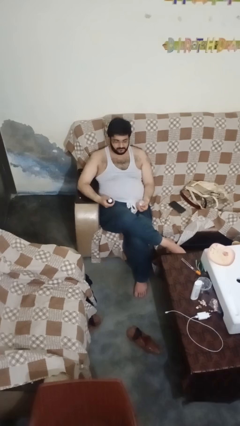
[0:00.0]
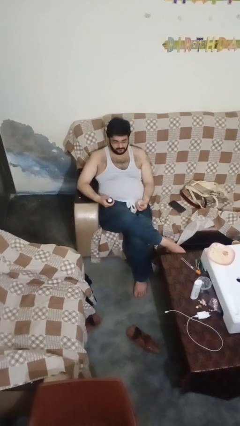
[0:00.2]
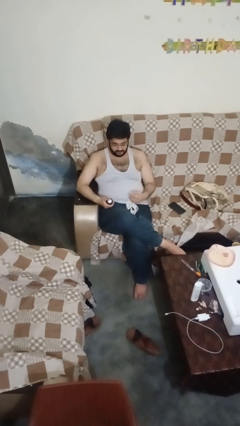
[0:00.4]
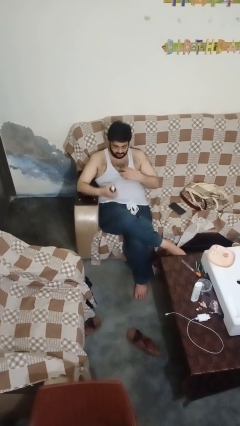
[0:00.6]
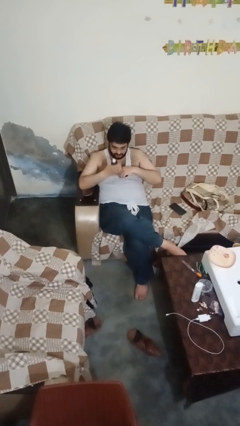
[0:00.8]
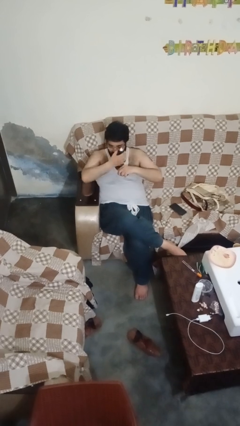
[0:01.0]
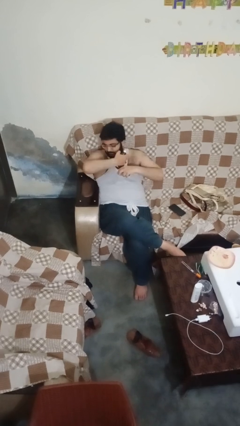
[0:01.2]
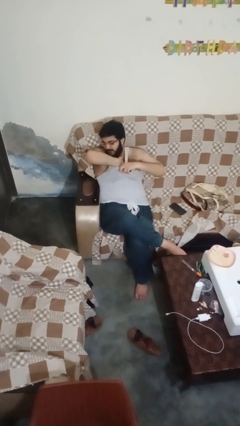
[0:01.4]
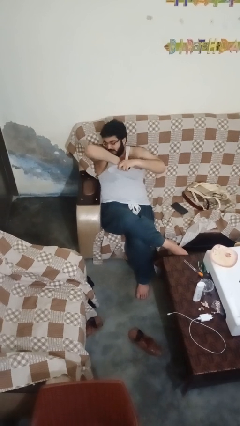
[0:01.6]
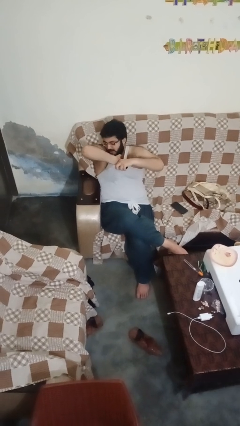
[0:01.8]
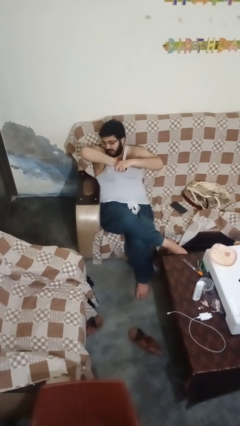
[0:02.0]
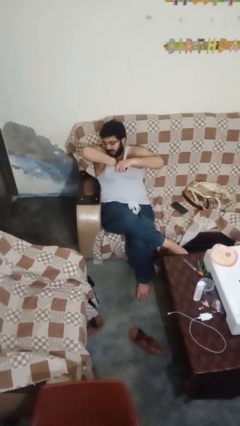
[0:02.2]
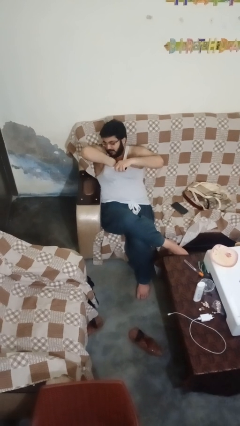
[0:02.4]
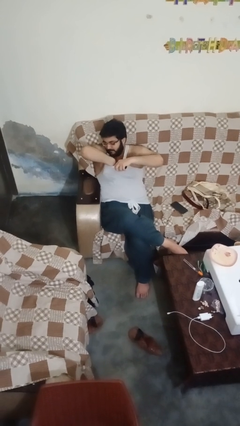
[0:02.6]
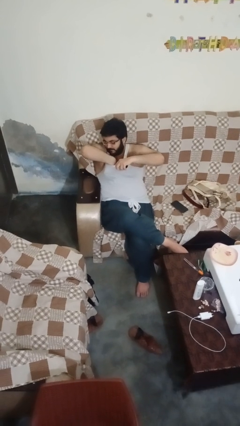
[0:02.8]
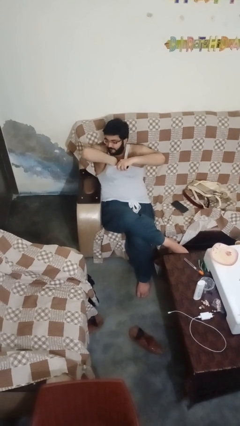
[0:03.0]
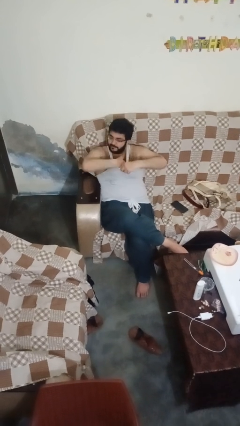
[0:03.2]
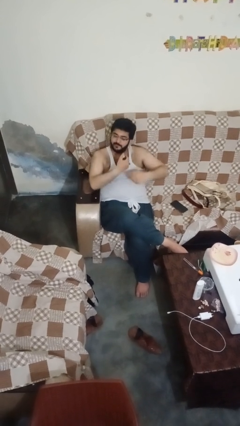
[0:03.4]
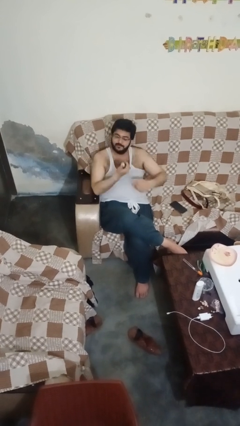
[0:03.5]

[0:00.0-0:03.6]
person applies deodorant

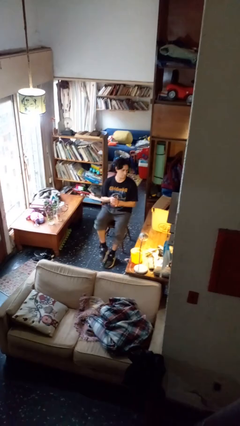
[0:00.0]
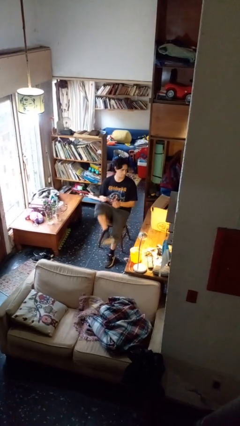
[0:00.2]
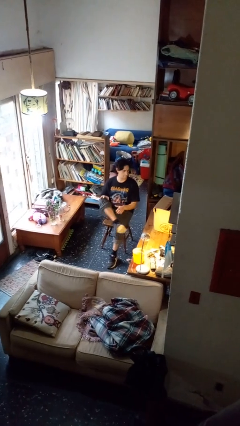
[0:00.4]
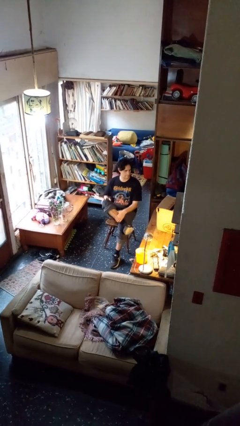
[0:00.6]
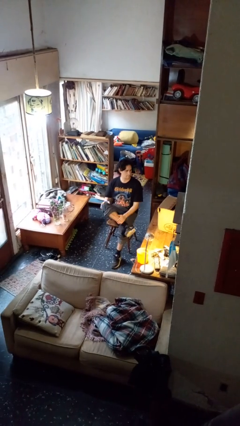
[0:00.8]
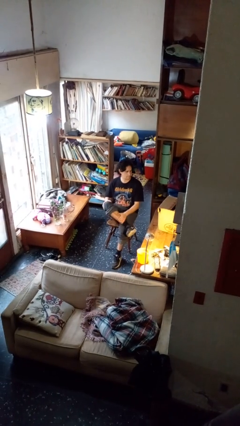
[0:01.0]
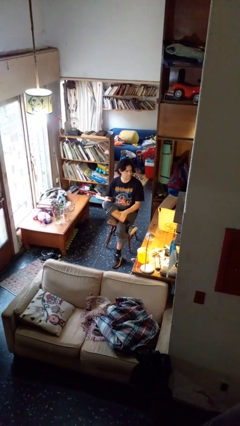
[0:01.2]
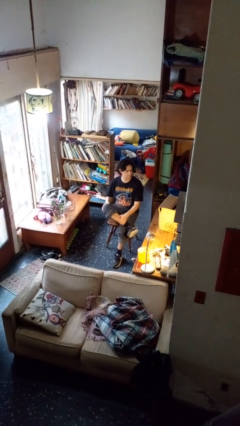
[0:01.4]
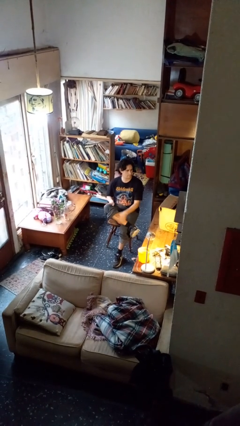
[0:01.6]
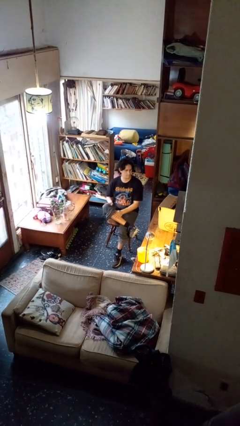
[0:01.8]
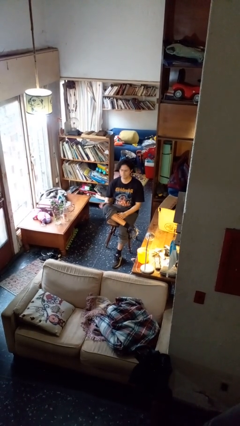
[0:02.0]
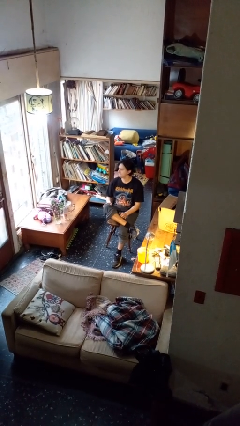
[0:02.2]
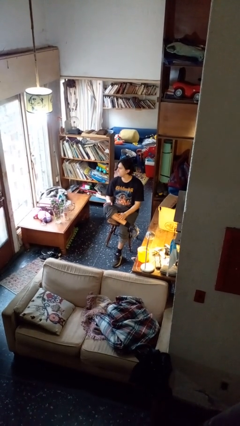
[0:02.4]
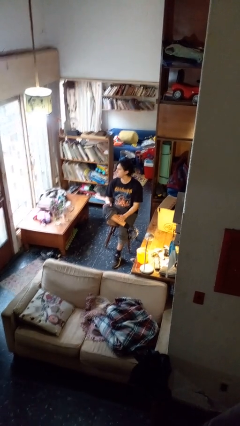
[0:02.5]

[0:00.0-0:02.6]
person crosses legs

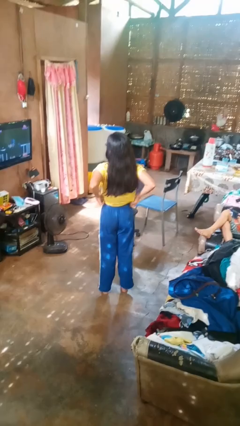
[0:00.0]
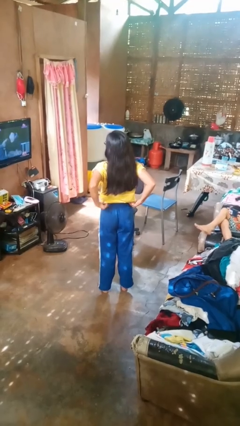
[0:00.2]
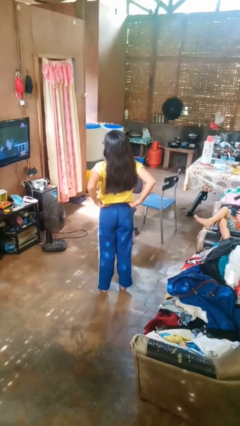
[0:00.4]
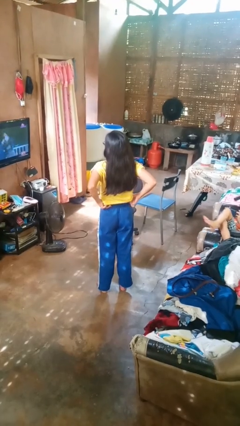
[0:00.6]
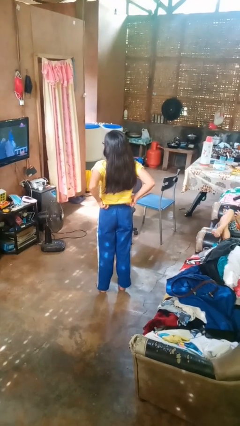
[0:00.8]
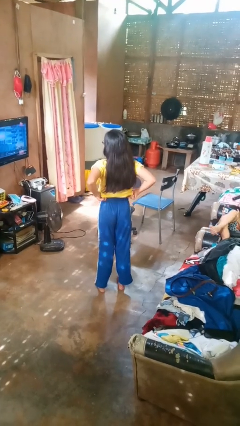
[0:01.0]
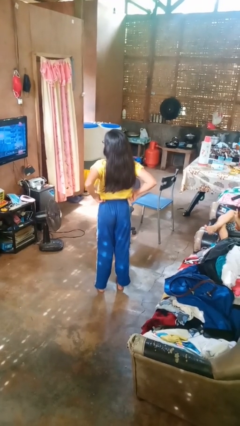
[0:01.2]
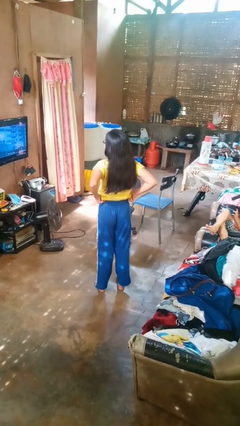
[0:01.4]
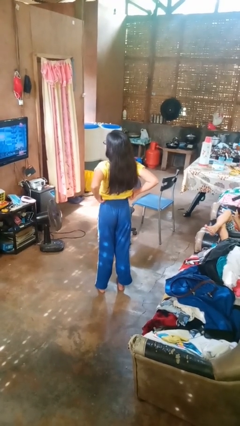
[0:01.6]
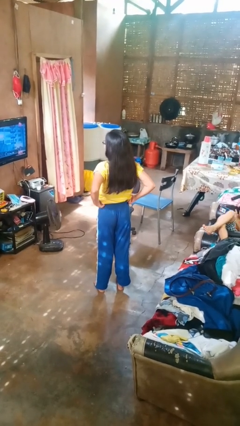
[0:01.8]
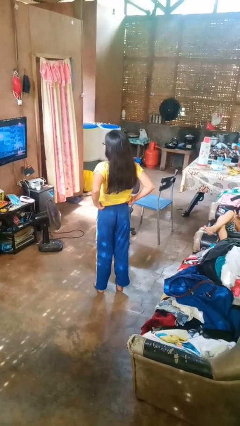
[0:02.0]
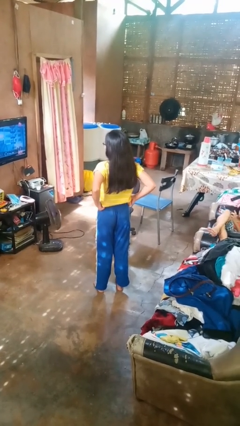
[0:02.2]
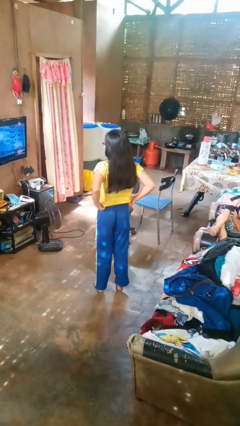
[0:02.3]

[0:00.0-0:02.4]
person hikes up pants

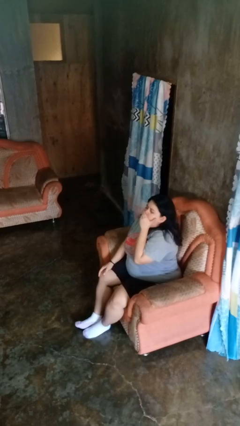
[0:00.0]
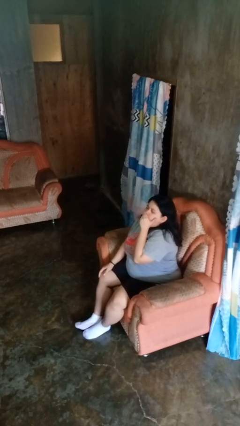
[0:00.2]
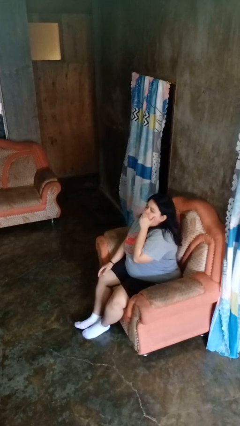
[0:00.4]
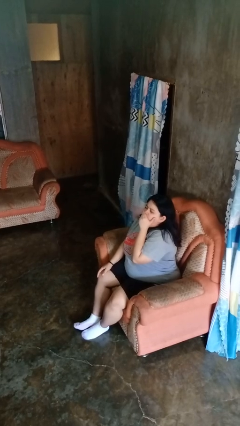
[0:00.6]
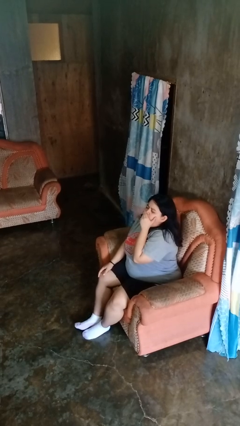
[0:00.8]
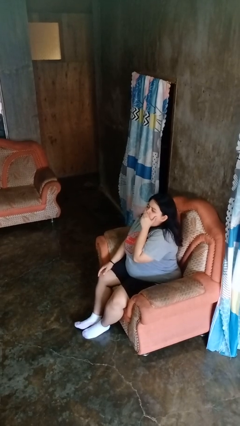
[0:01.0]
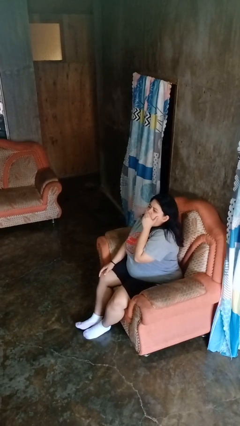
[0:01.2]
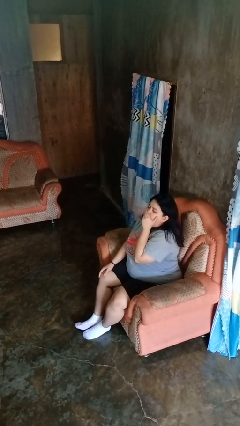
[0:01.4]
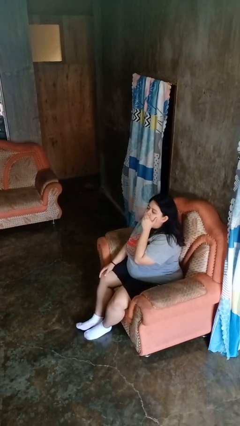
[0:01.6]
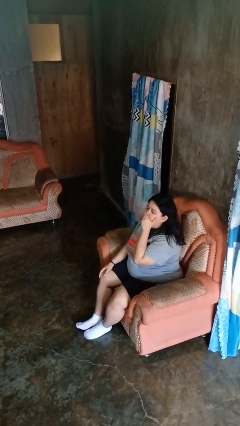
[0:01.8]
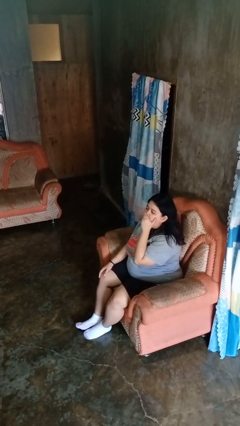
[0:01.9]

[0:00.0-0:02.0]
person yawns

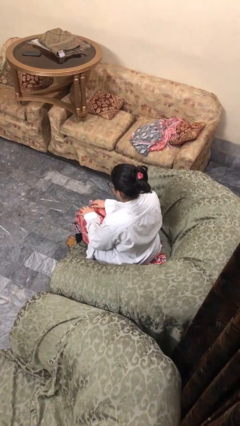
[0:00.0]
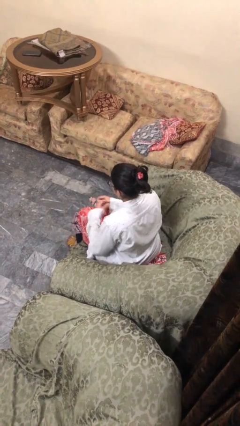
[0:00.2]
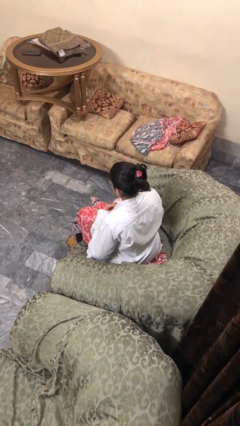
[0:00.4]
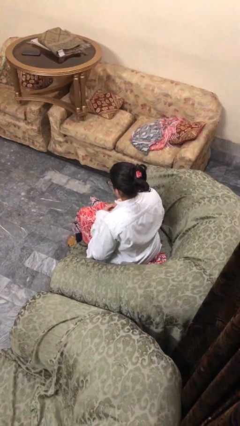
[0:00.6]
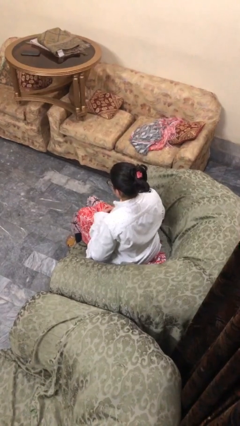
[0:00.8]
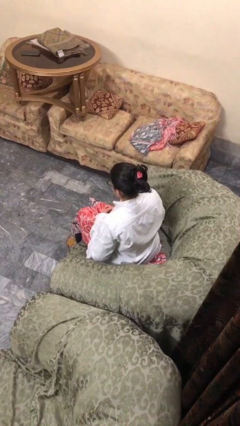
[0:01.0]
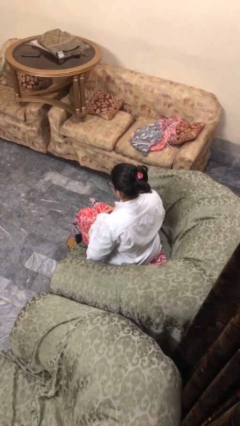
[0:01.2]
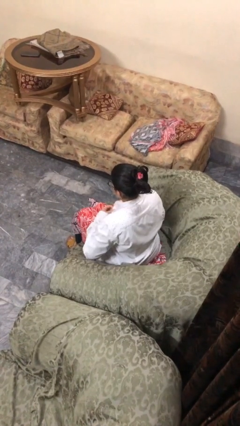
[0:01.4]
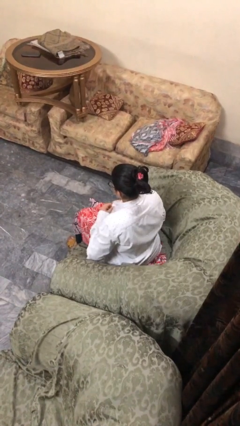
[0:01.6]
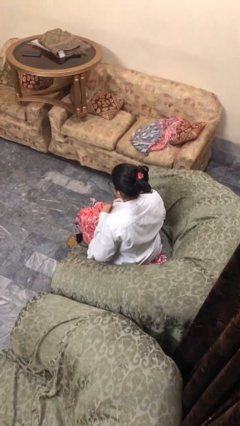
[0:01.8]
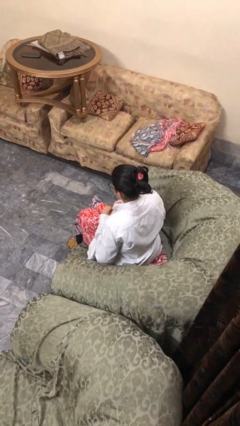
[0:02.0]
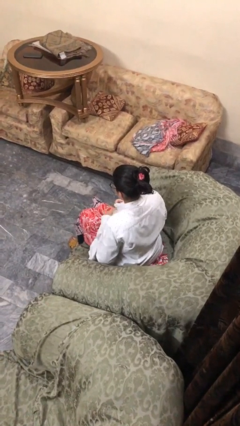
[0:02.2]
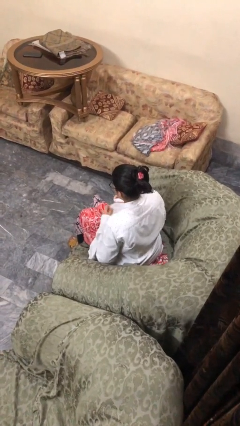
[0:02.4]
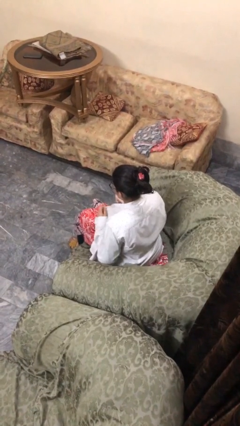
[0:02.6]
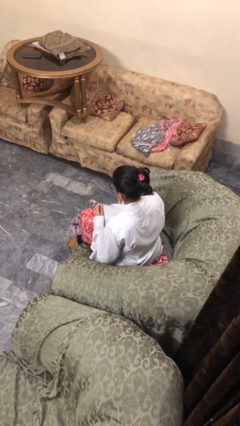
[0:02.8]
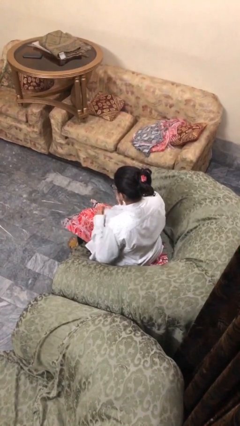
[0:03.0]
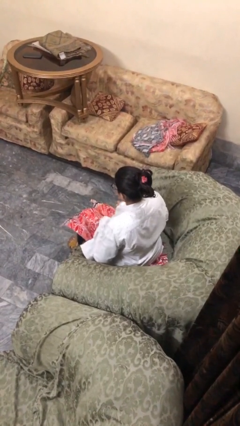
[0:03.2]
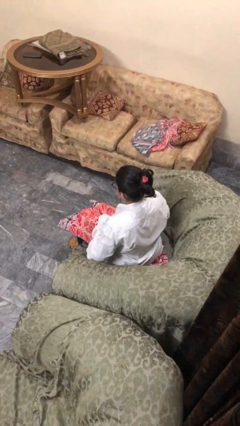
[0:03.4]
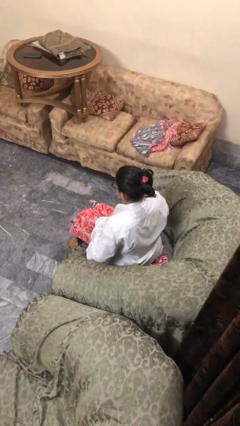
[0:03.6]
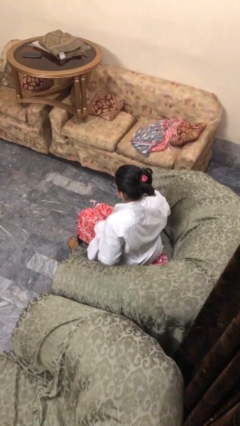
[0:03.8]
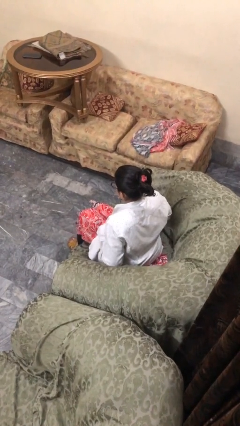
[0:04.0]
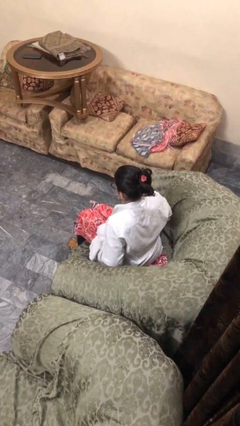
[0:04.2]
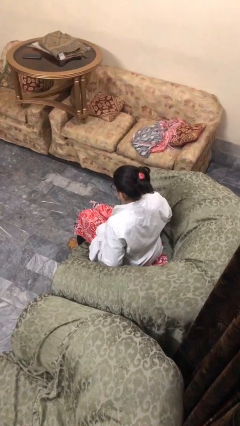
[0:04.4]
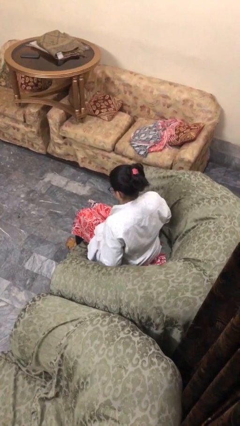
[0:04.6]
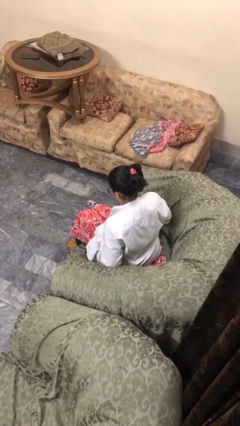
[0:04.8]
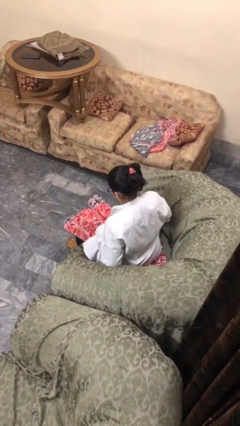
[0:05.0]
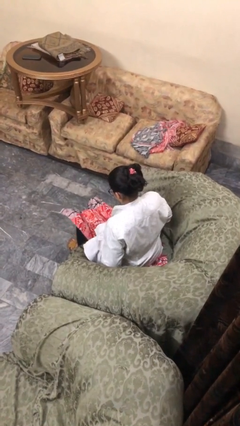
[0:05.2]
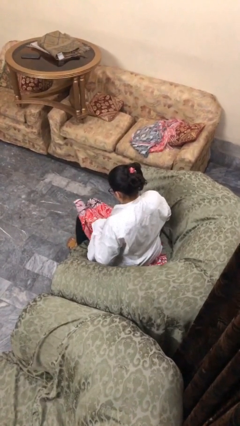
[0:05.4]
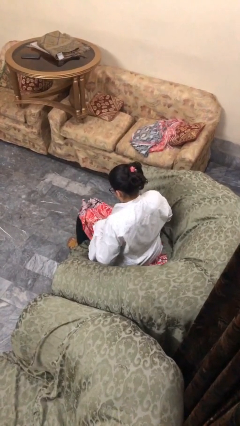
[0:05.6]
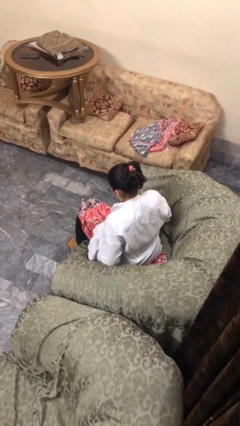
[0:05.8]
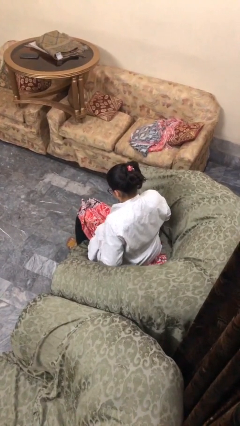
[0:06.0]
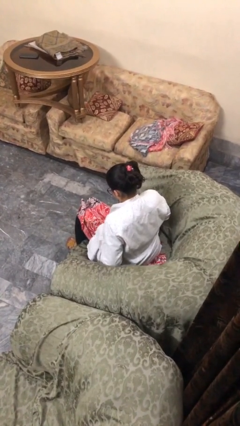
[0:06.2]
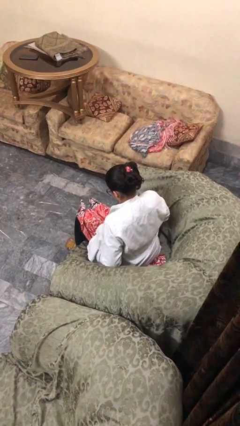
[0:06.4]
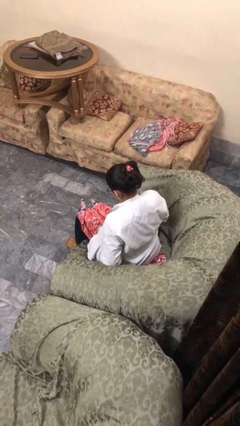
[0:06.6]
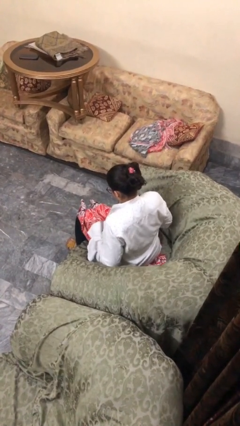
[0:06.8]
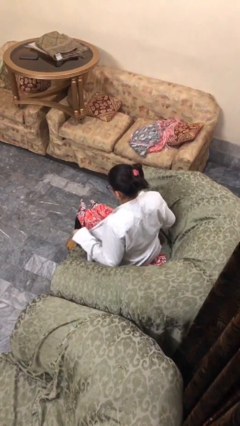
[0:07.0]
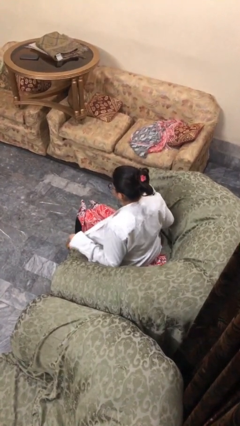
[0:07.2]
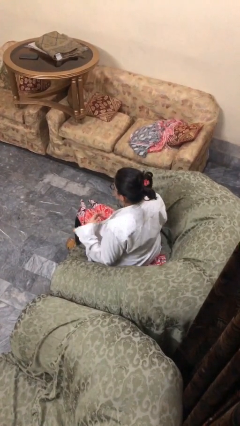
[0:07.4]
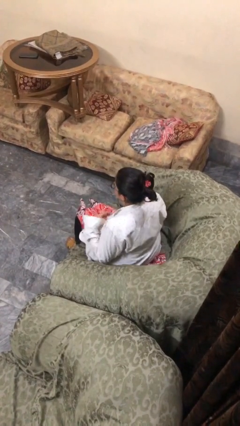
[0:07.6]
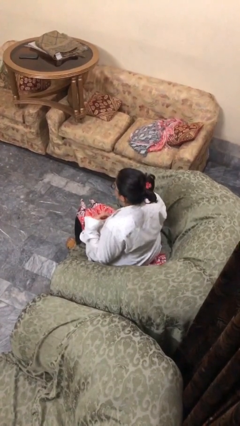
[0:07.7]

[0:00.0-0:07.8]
person unbuttons shirt
